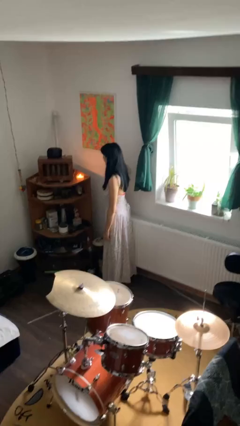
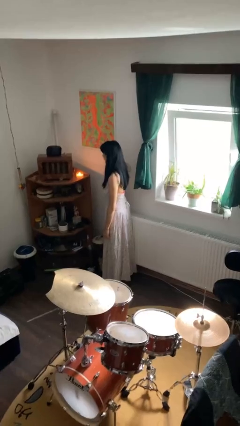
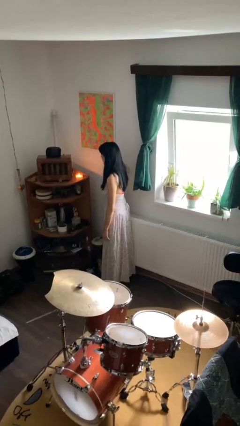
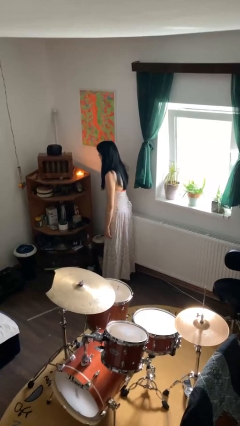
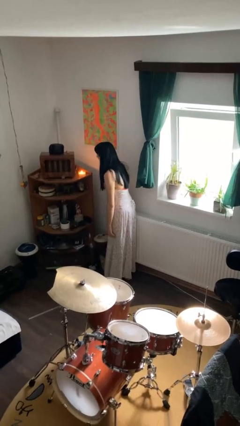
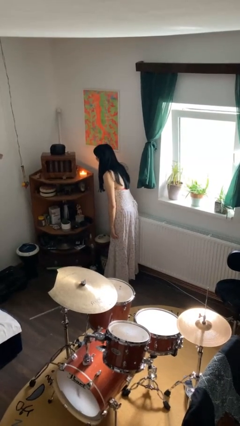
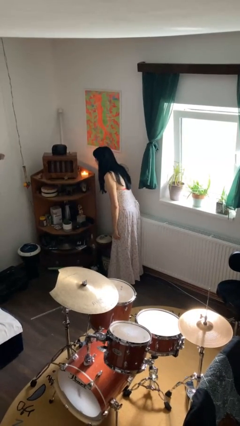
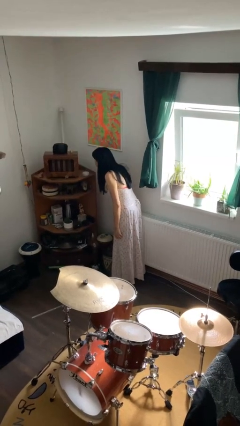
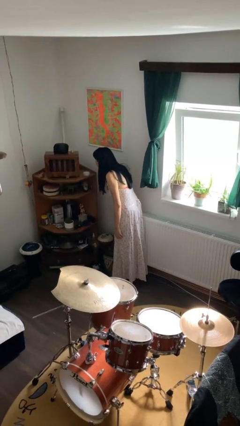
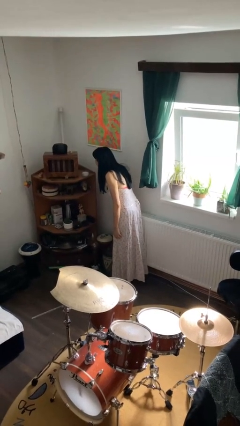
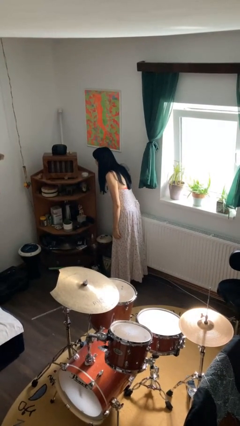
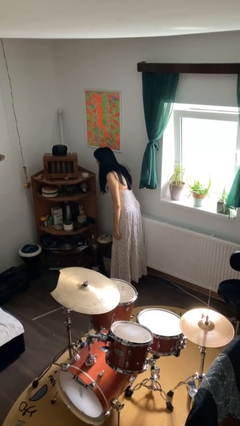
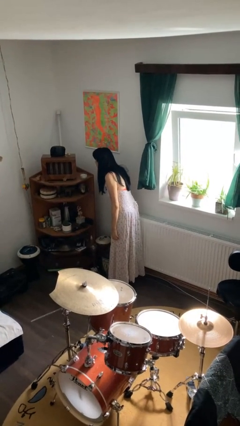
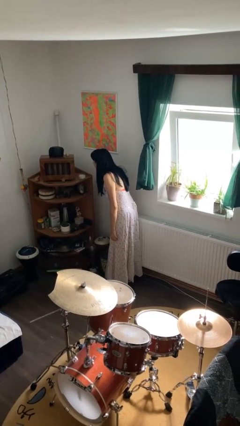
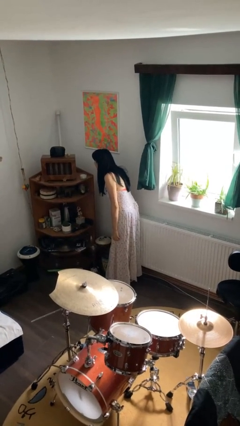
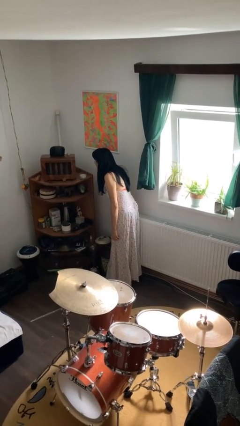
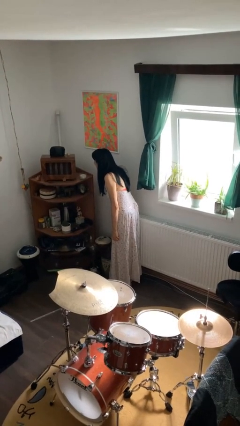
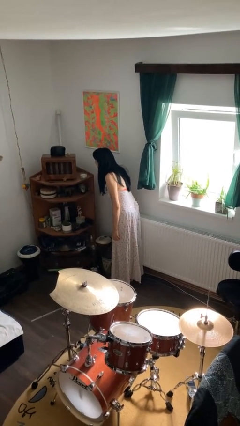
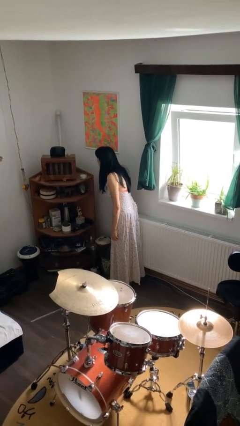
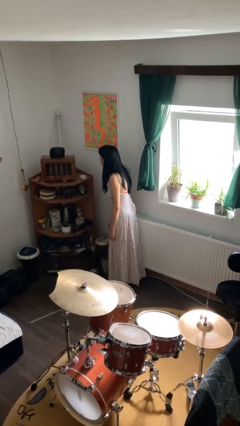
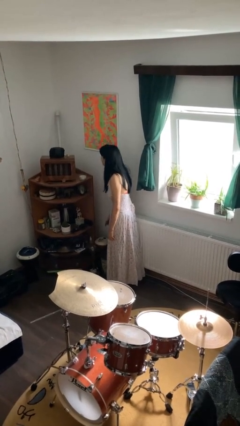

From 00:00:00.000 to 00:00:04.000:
person extinguishes candle

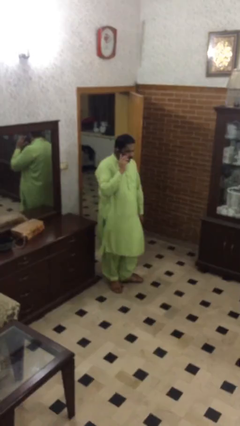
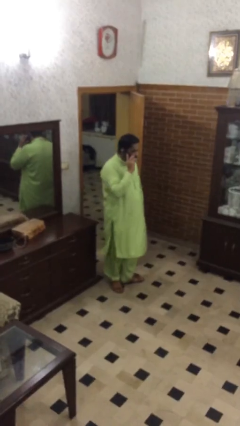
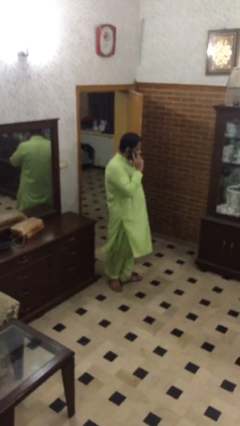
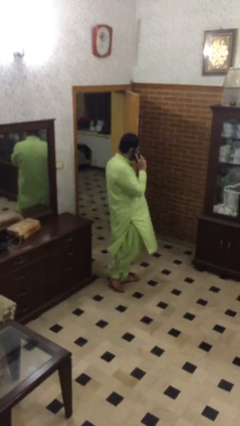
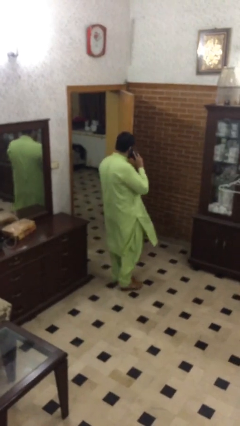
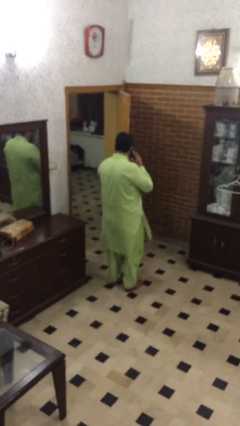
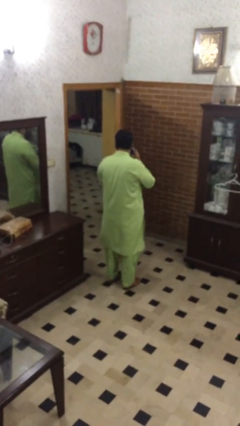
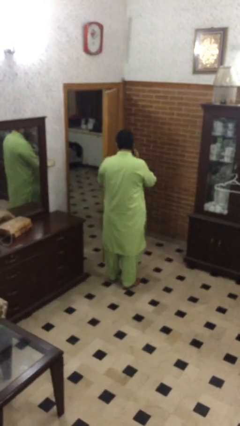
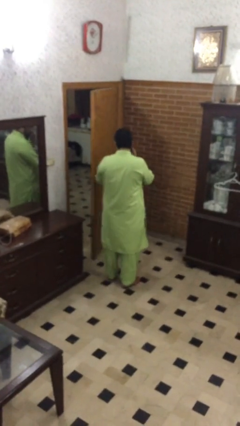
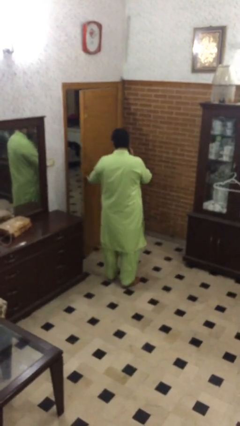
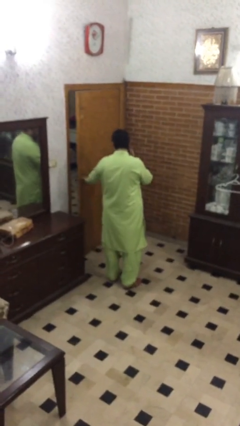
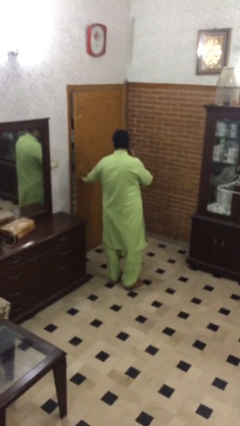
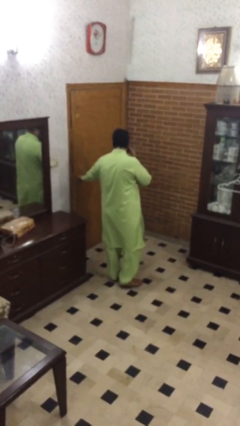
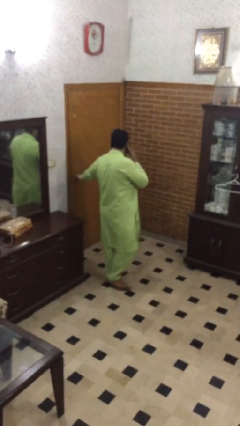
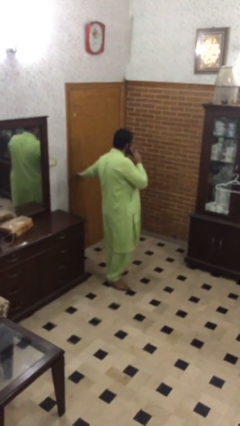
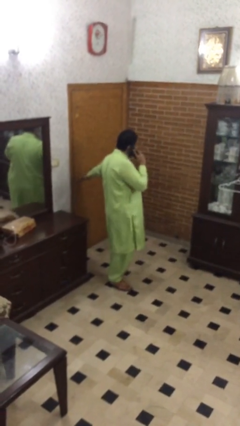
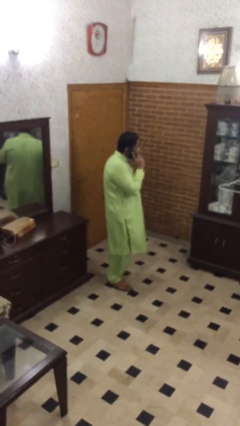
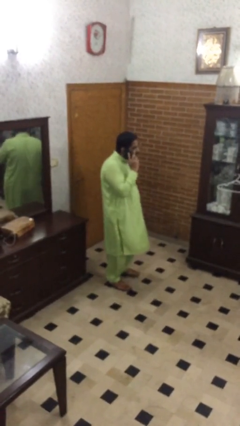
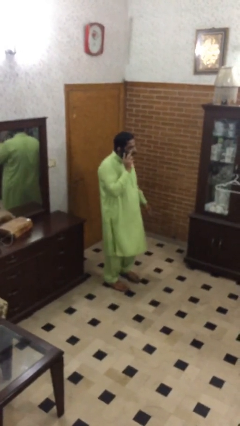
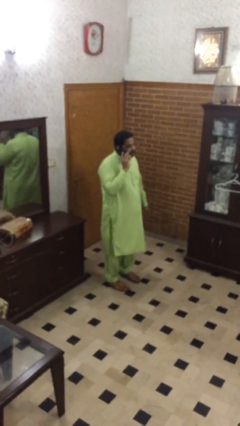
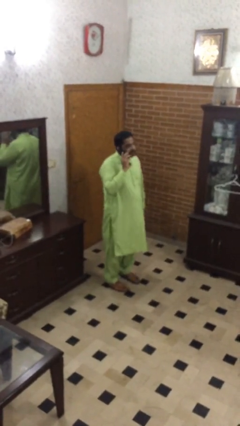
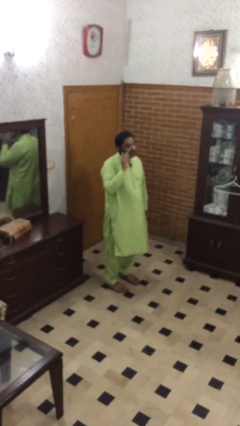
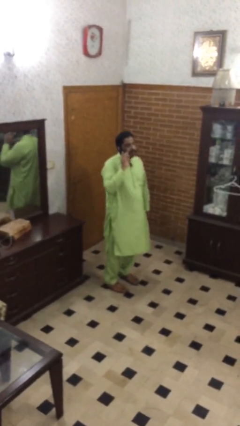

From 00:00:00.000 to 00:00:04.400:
person closes facility door

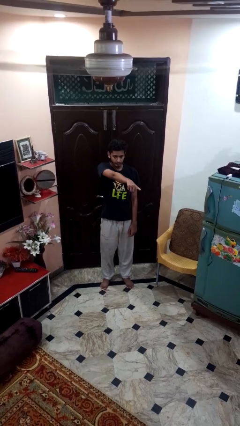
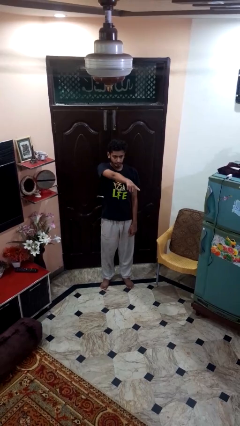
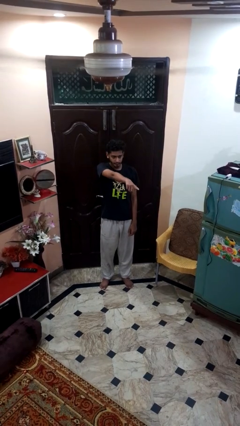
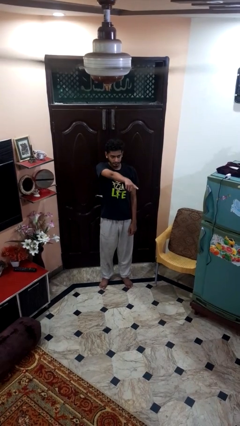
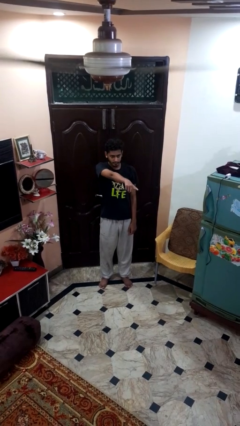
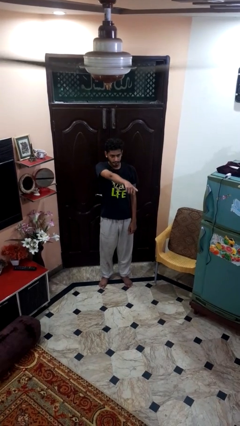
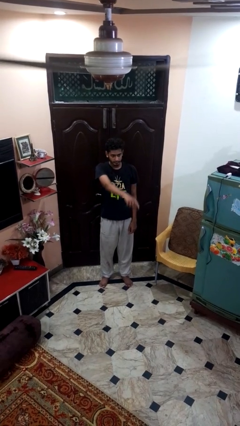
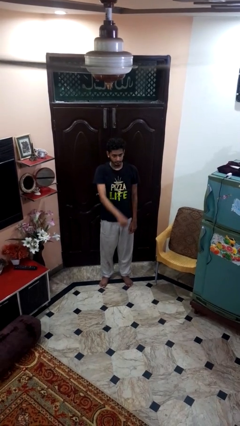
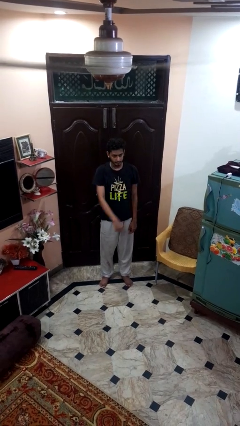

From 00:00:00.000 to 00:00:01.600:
person points at person

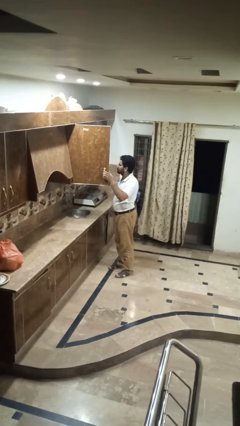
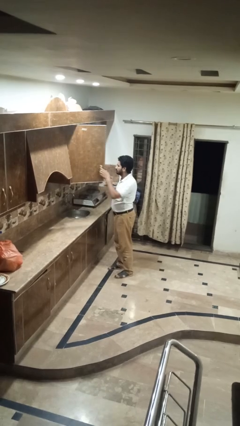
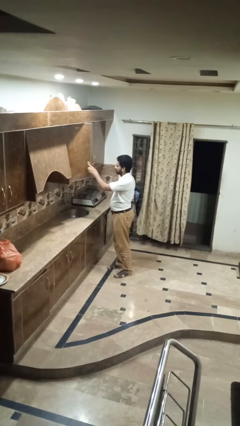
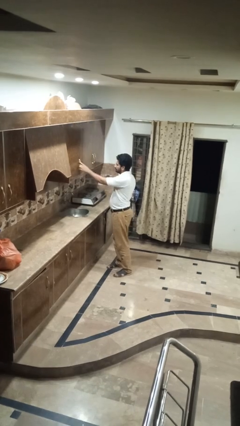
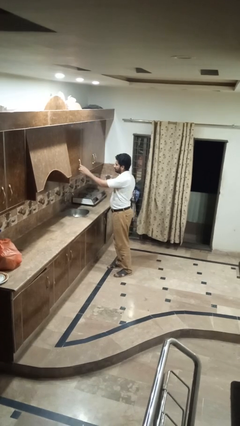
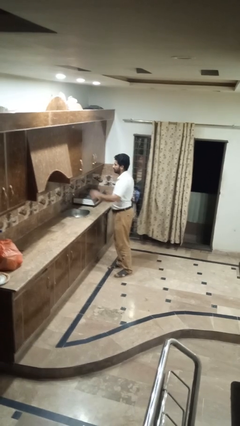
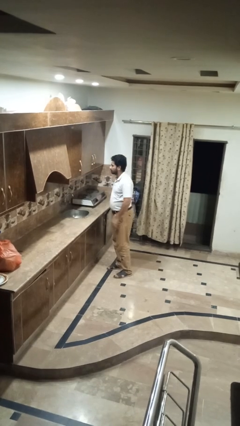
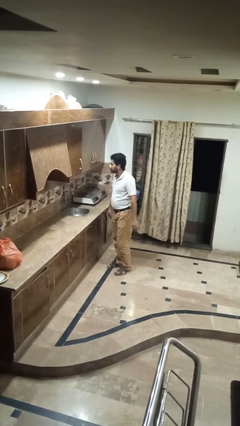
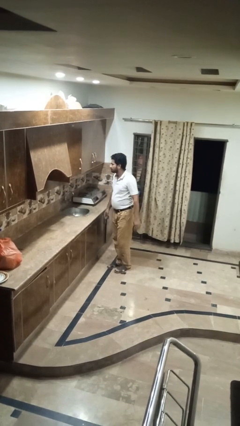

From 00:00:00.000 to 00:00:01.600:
person closes kitchen drawer

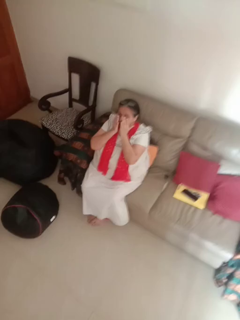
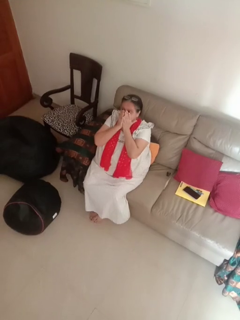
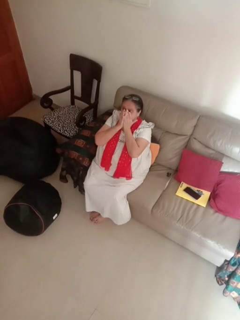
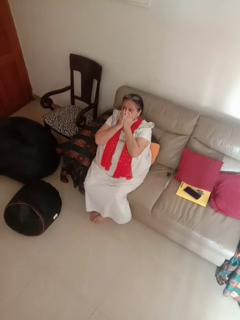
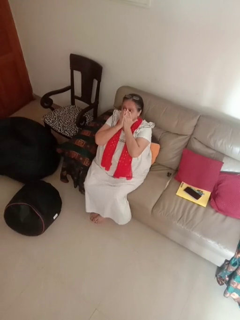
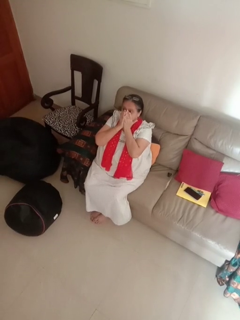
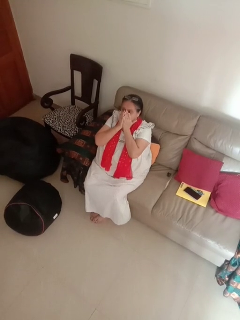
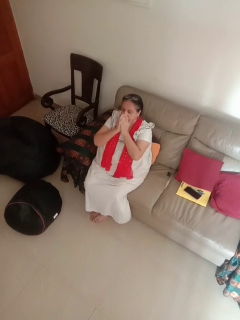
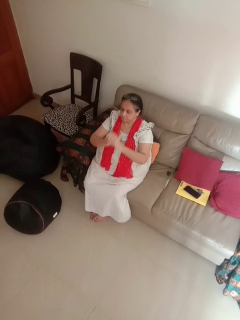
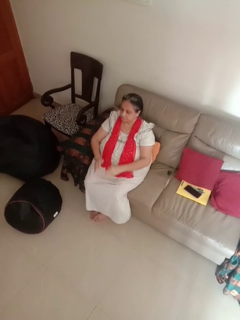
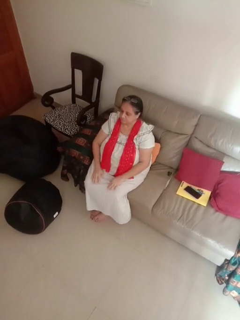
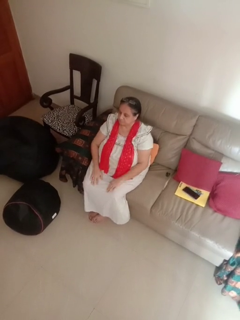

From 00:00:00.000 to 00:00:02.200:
person covers face with hands

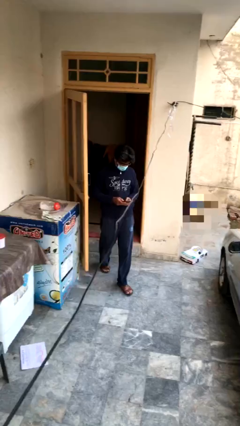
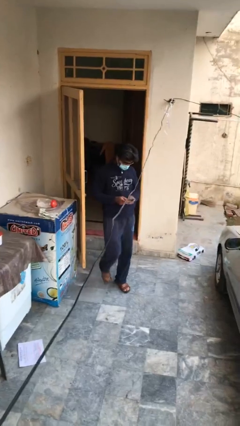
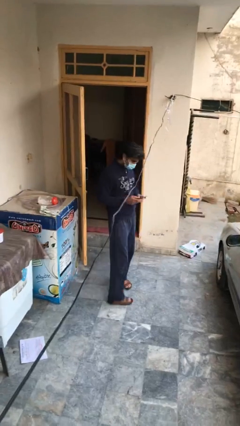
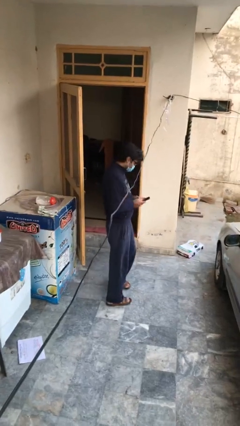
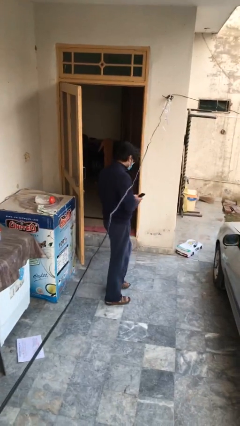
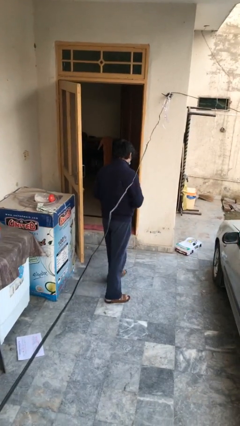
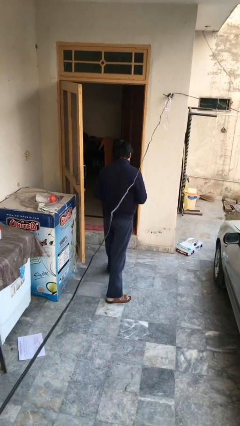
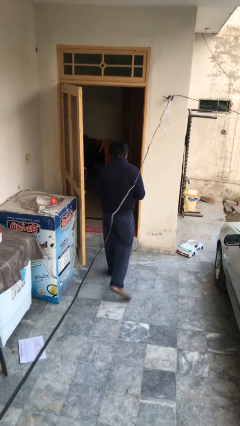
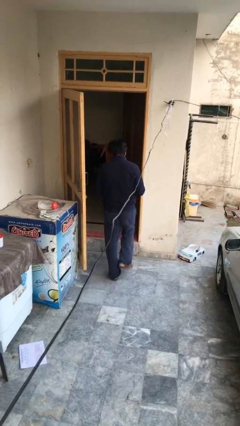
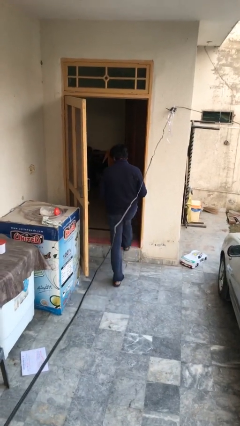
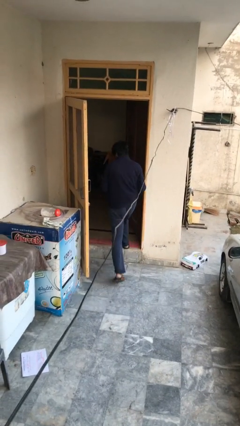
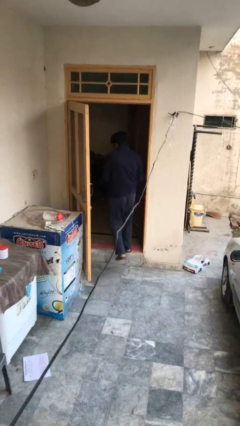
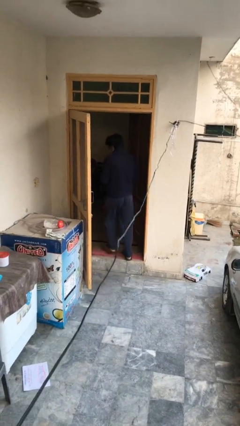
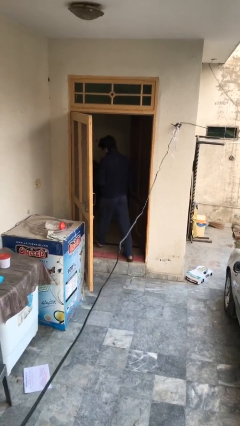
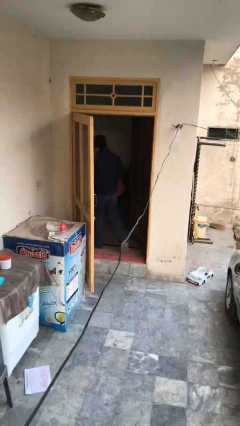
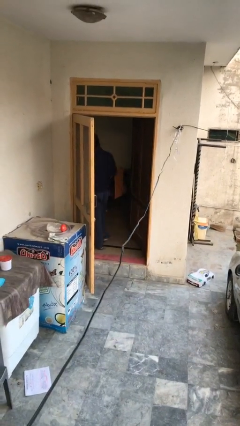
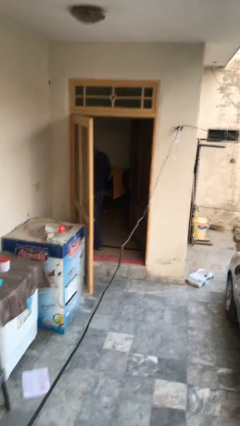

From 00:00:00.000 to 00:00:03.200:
person exits scene through structure

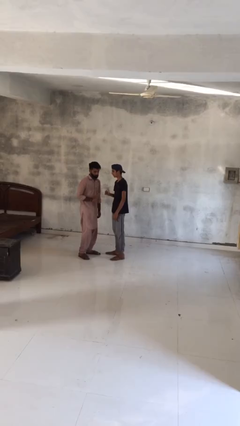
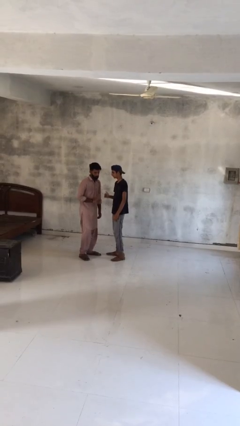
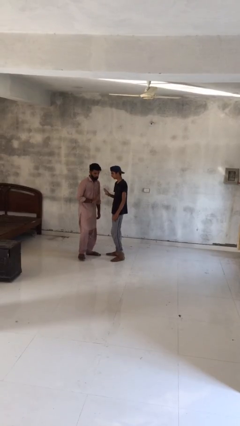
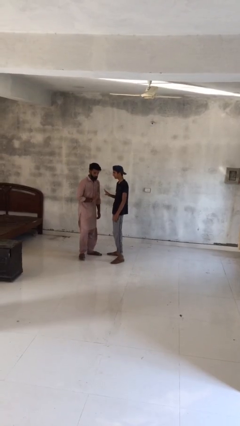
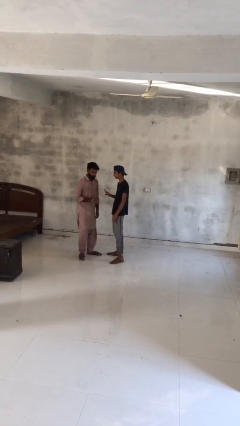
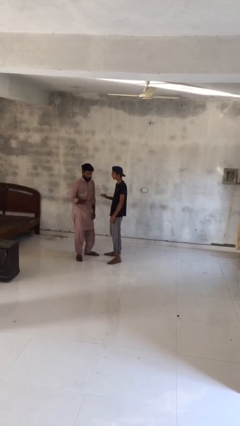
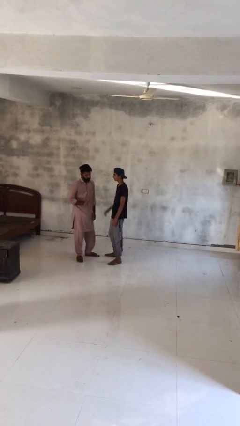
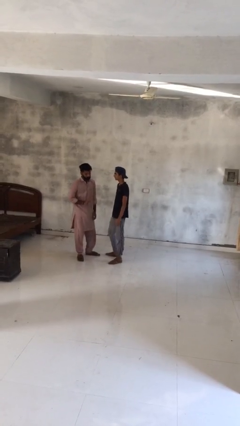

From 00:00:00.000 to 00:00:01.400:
person talks to person
